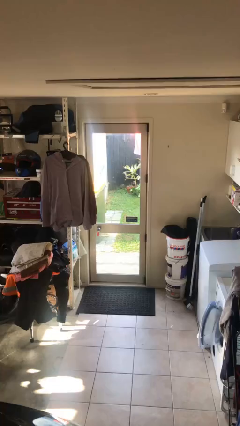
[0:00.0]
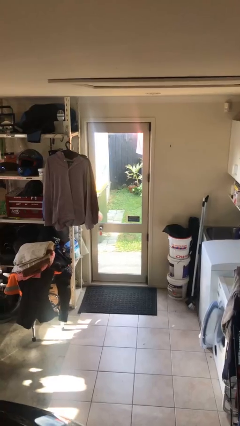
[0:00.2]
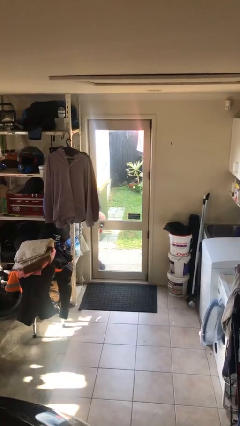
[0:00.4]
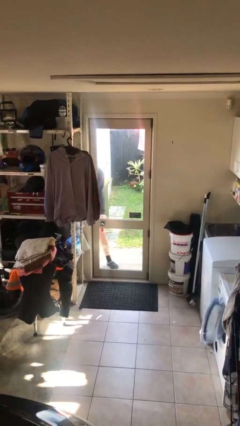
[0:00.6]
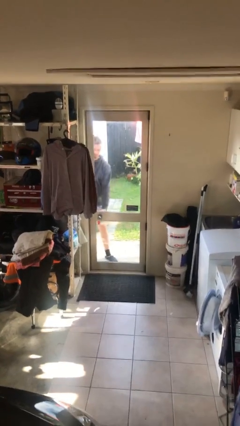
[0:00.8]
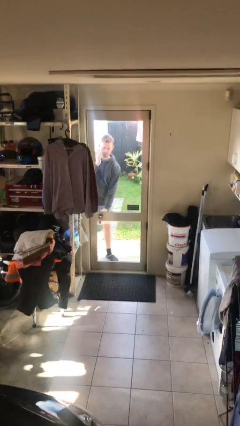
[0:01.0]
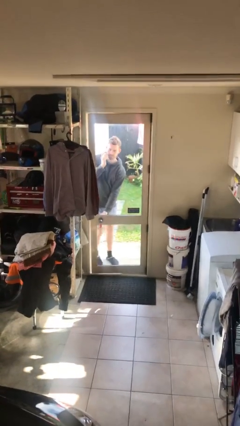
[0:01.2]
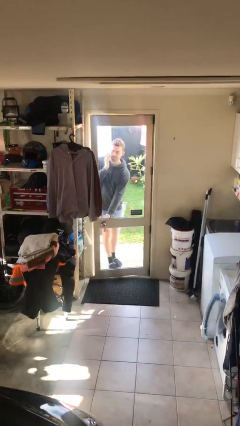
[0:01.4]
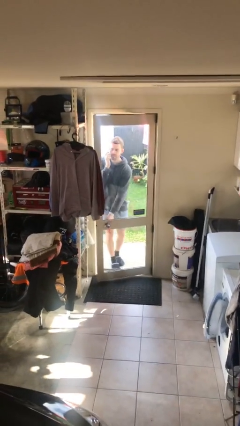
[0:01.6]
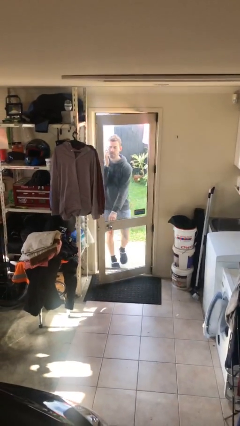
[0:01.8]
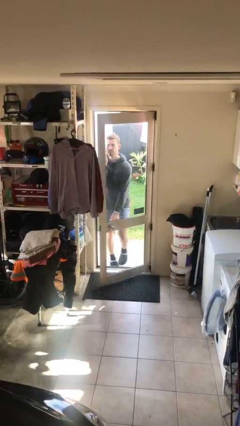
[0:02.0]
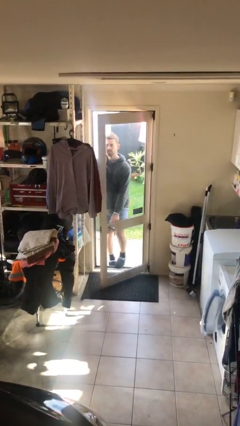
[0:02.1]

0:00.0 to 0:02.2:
person opens facility door

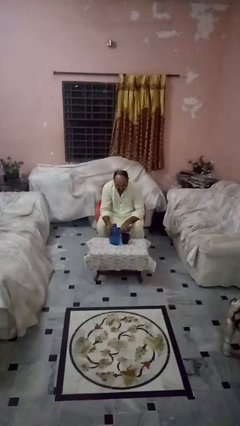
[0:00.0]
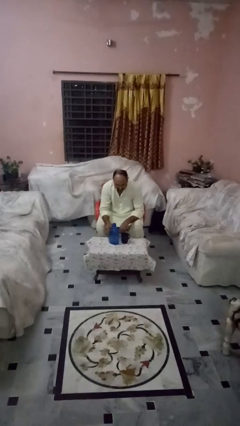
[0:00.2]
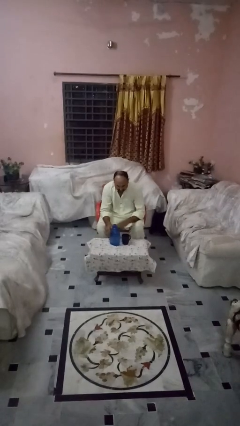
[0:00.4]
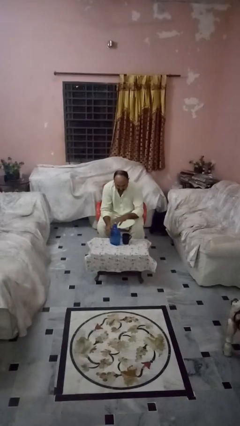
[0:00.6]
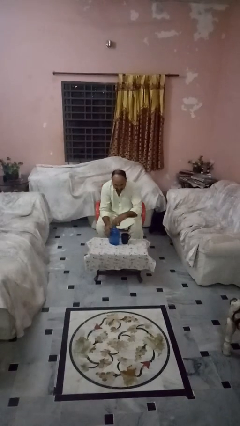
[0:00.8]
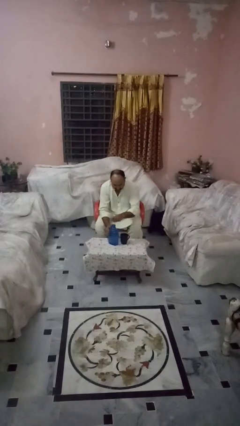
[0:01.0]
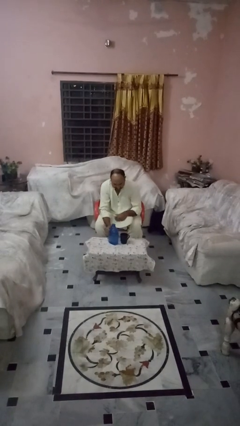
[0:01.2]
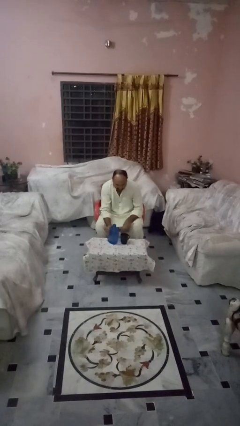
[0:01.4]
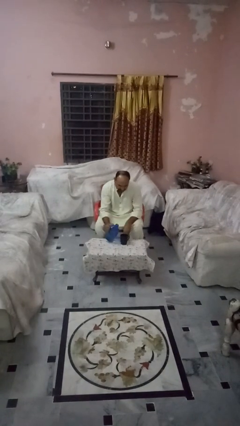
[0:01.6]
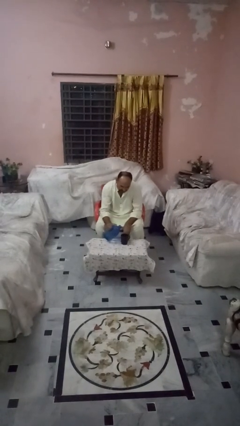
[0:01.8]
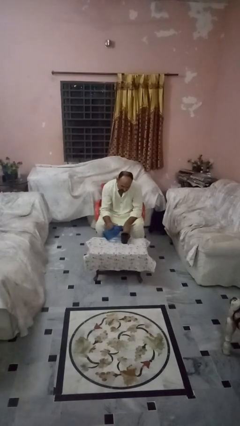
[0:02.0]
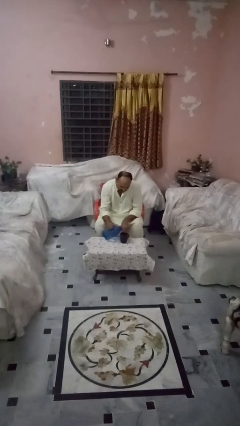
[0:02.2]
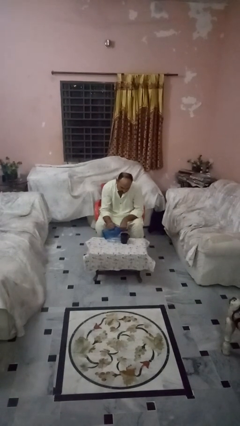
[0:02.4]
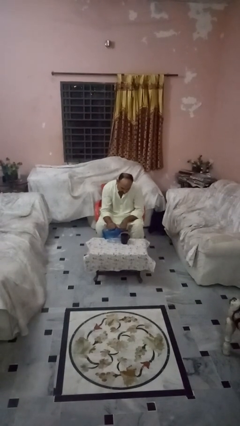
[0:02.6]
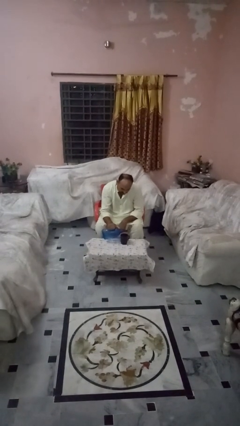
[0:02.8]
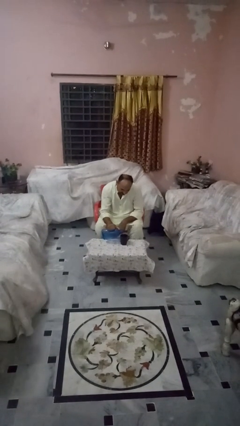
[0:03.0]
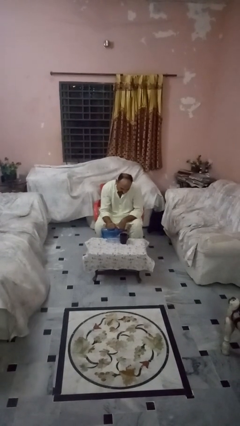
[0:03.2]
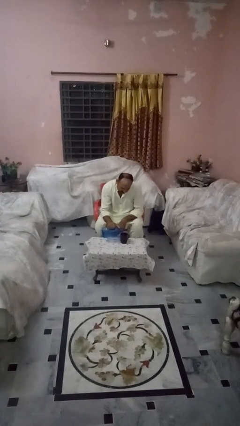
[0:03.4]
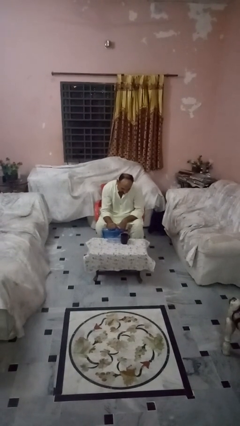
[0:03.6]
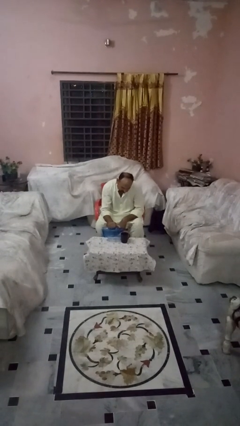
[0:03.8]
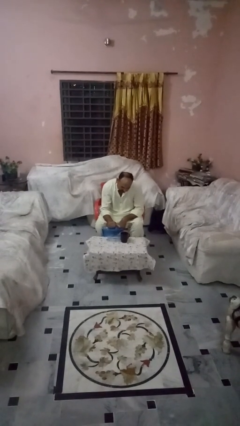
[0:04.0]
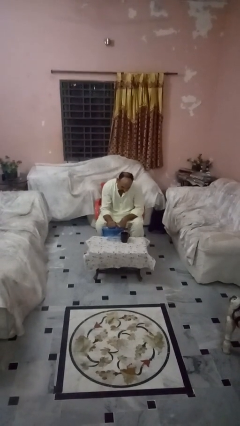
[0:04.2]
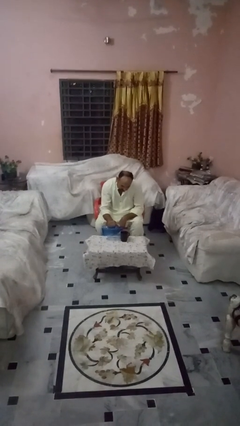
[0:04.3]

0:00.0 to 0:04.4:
person pours liquid into cup

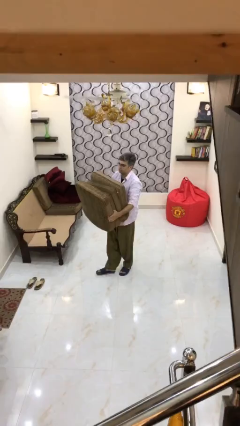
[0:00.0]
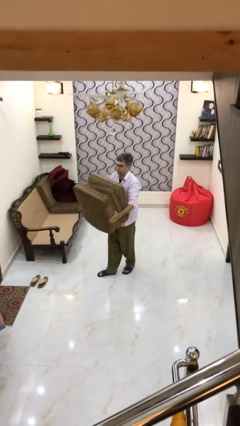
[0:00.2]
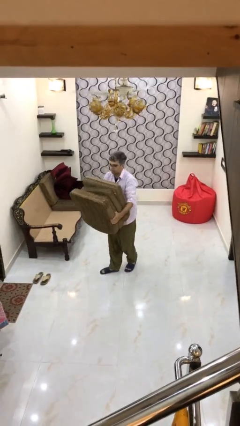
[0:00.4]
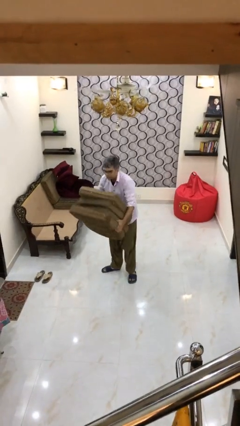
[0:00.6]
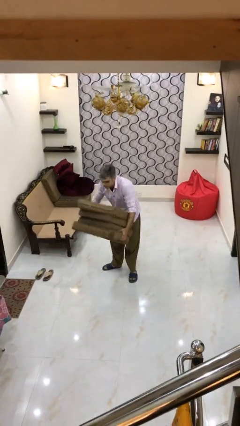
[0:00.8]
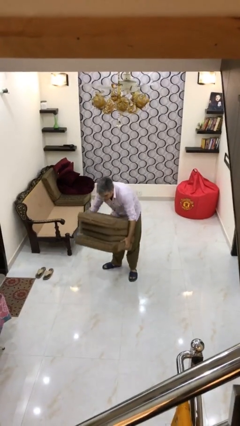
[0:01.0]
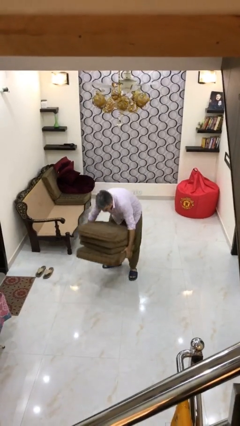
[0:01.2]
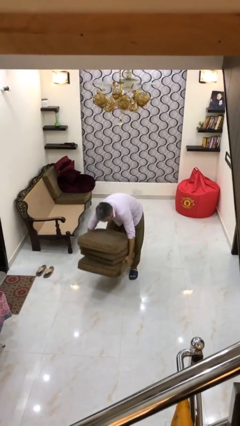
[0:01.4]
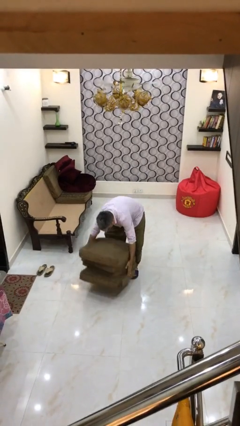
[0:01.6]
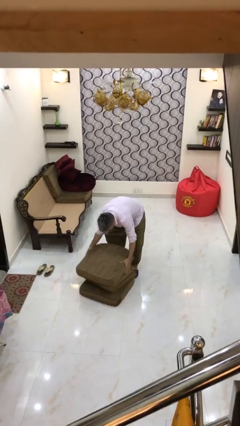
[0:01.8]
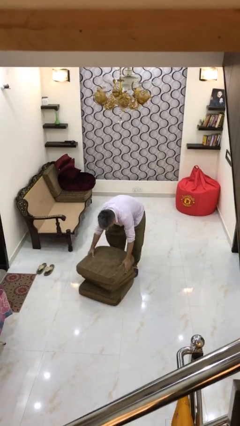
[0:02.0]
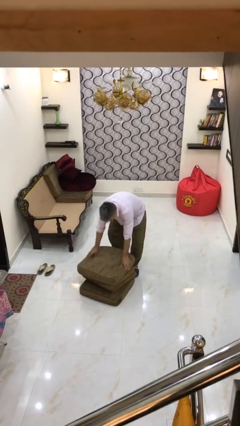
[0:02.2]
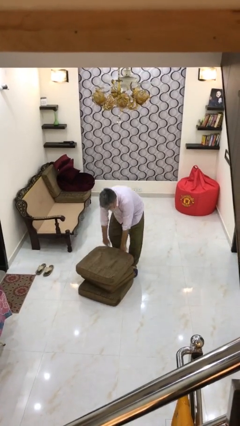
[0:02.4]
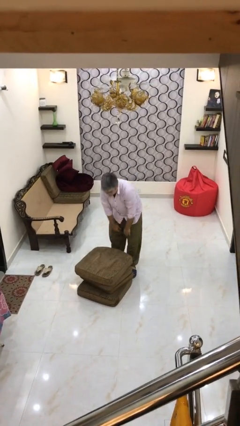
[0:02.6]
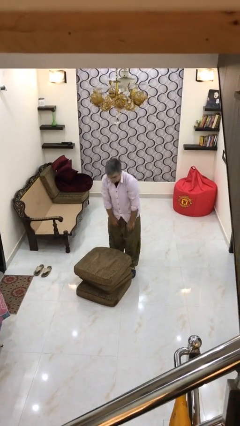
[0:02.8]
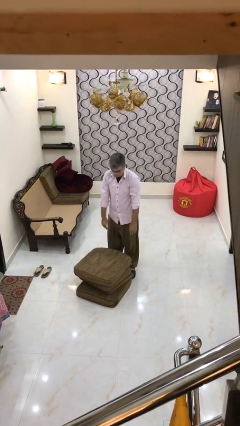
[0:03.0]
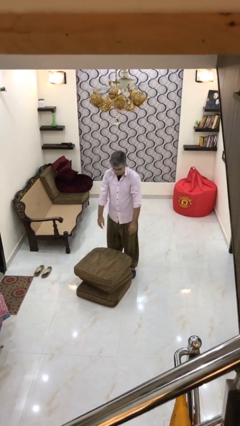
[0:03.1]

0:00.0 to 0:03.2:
person puts down object on floor

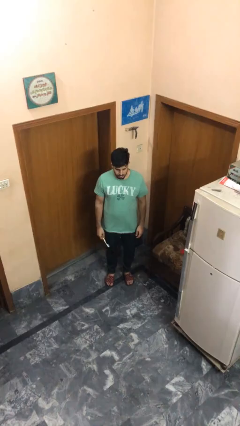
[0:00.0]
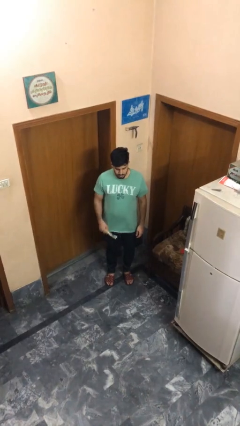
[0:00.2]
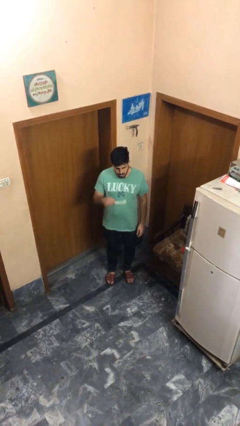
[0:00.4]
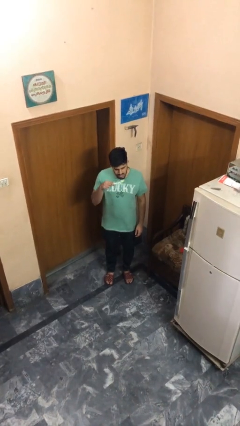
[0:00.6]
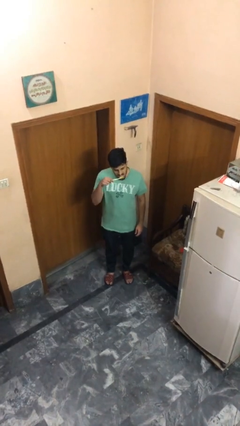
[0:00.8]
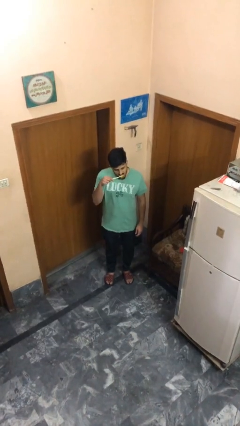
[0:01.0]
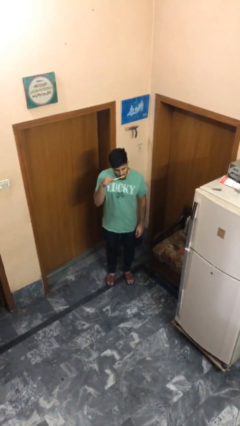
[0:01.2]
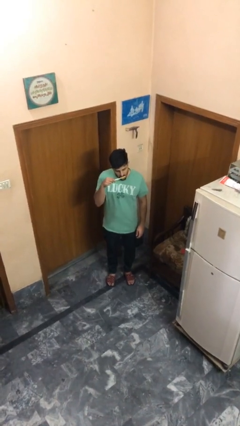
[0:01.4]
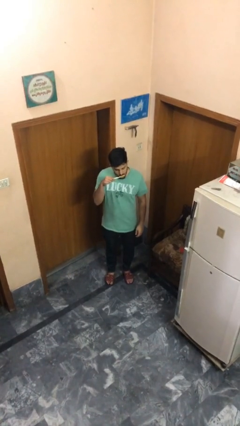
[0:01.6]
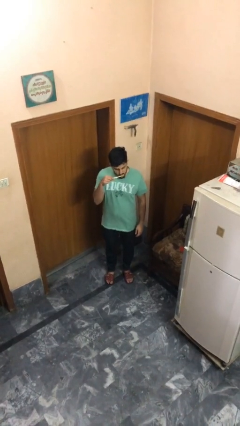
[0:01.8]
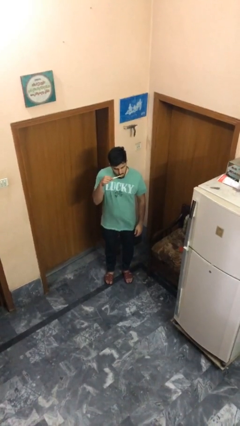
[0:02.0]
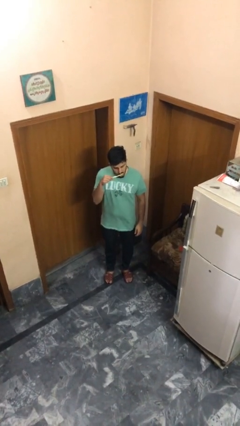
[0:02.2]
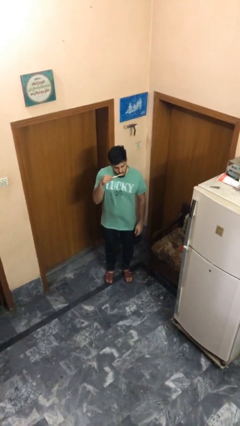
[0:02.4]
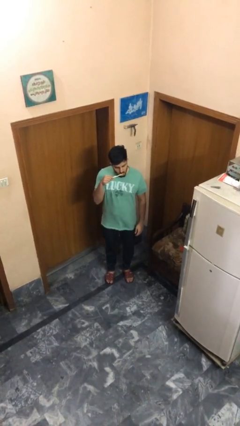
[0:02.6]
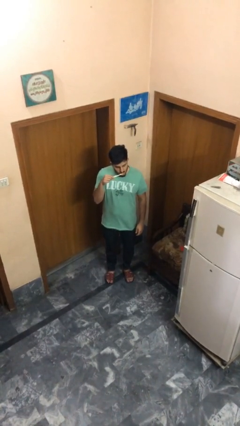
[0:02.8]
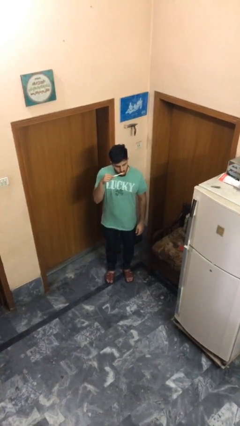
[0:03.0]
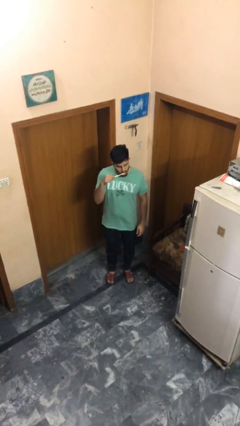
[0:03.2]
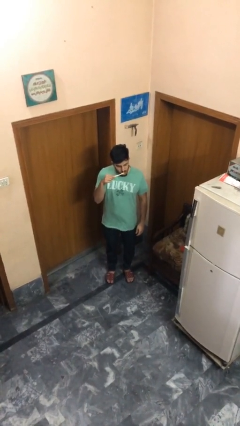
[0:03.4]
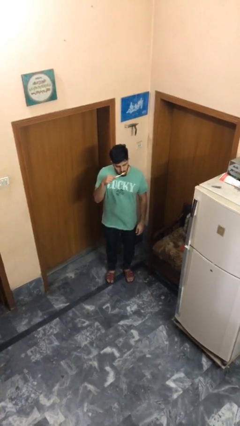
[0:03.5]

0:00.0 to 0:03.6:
person brushes teeth

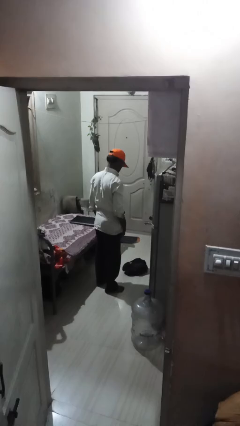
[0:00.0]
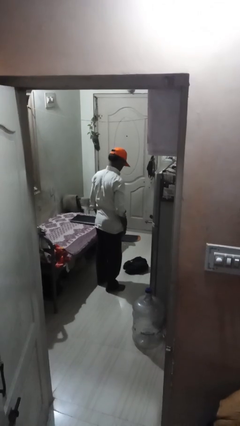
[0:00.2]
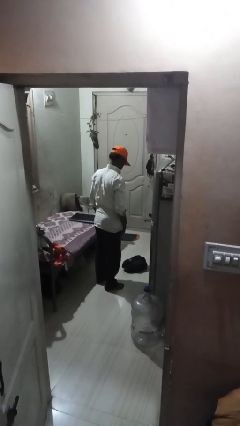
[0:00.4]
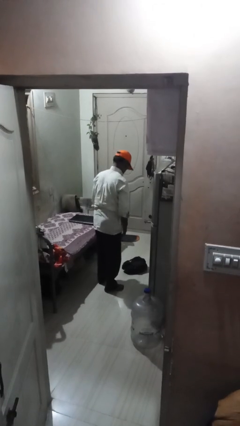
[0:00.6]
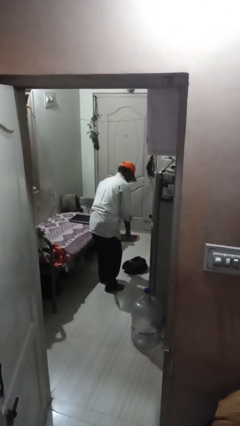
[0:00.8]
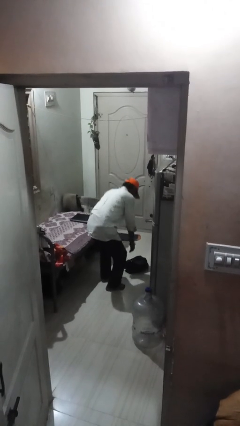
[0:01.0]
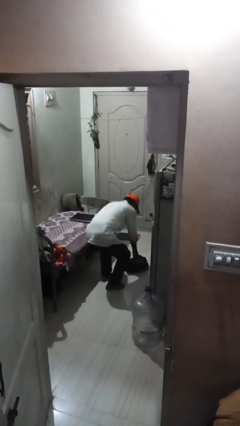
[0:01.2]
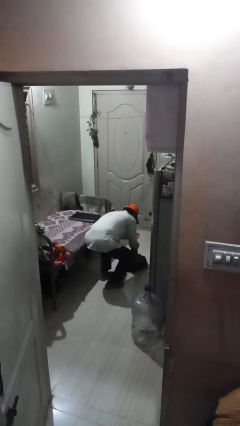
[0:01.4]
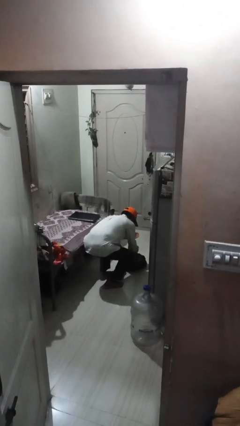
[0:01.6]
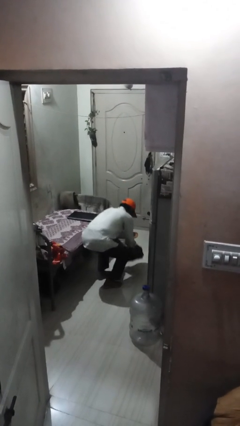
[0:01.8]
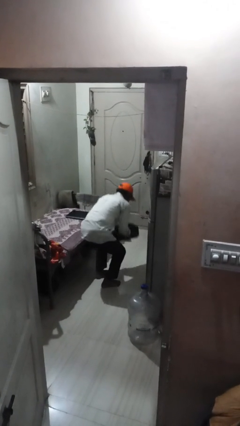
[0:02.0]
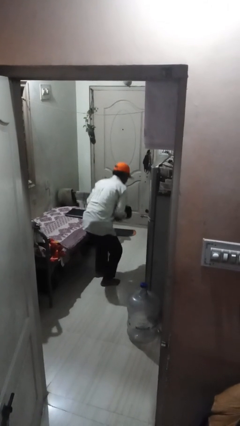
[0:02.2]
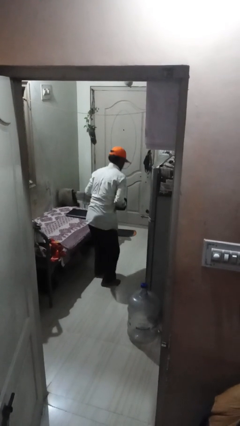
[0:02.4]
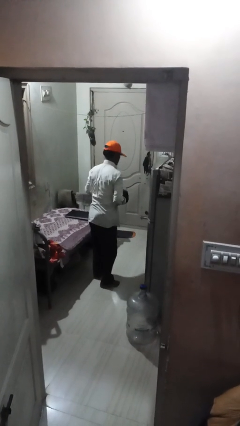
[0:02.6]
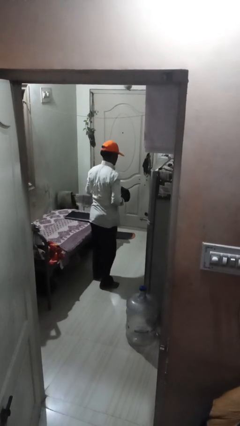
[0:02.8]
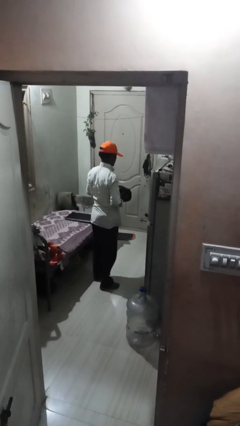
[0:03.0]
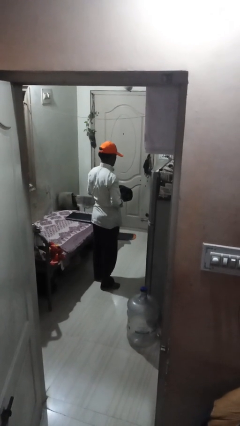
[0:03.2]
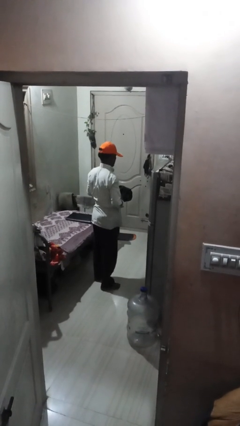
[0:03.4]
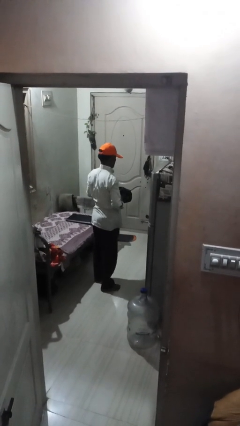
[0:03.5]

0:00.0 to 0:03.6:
person picks up object from floor

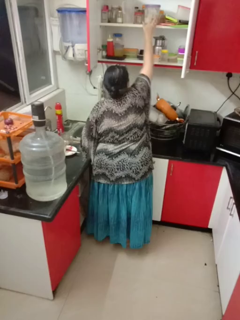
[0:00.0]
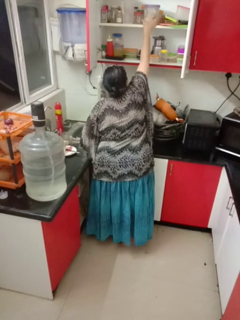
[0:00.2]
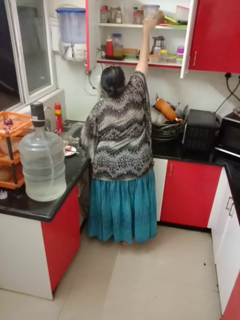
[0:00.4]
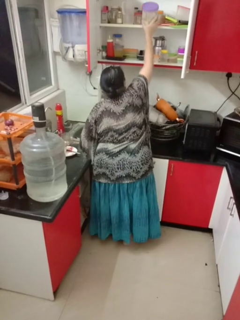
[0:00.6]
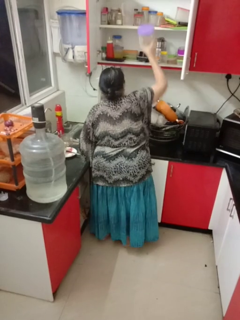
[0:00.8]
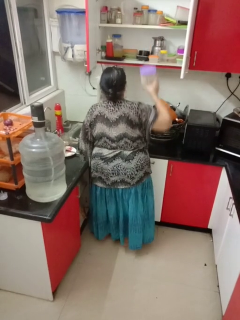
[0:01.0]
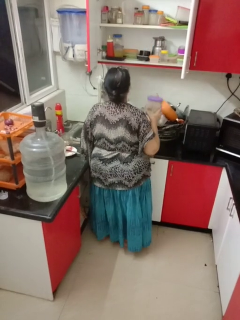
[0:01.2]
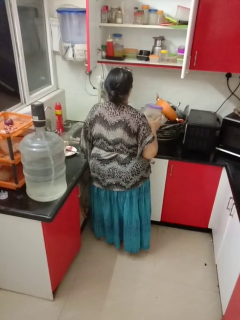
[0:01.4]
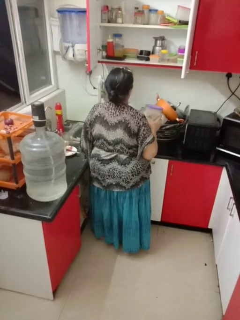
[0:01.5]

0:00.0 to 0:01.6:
person takes object from cabinet
